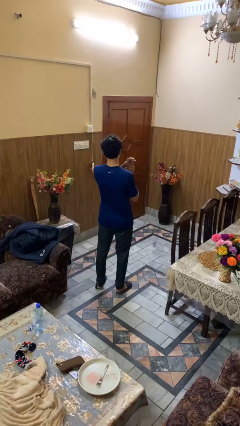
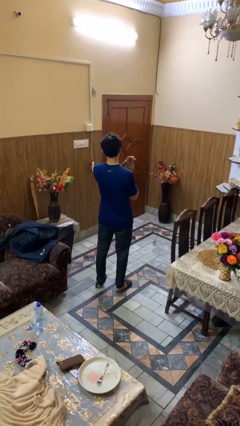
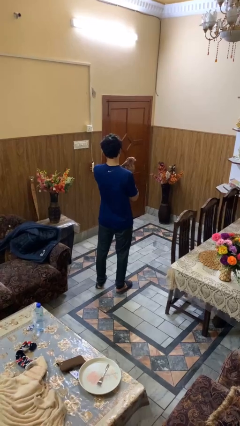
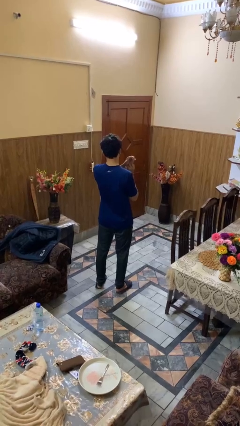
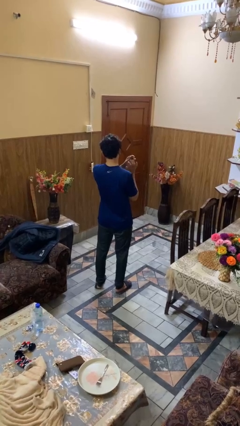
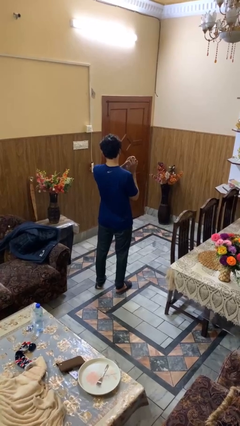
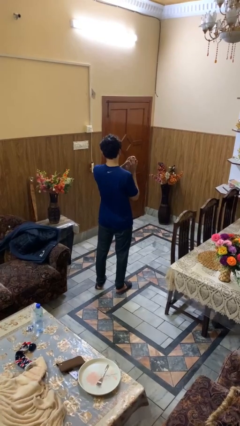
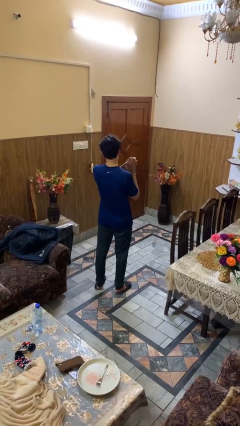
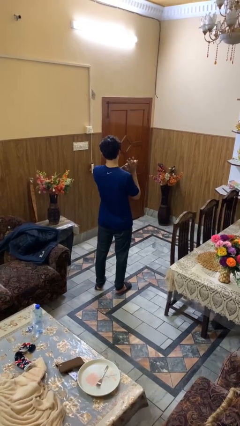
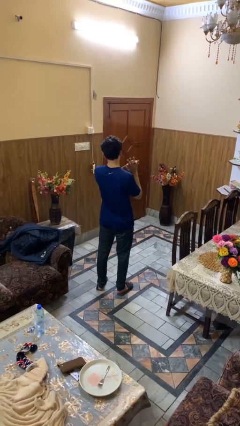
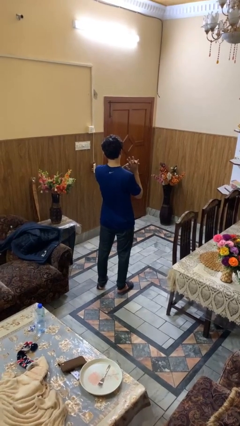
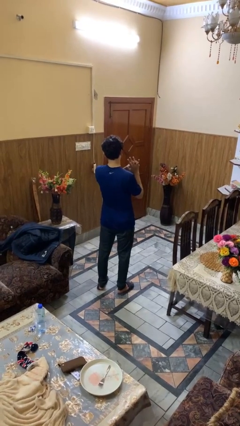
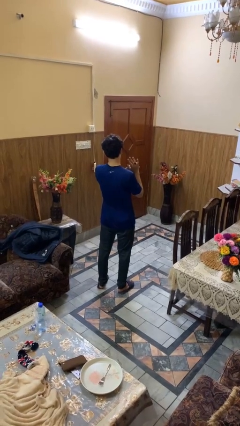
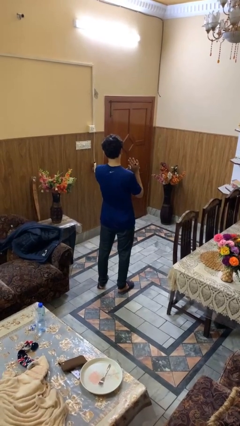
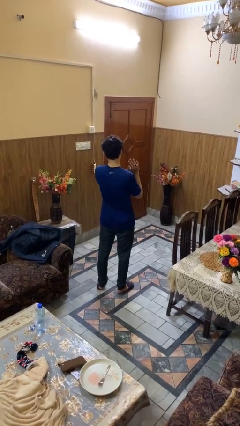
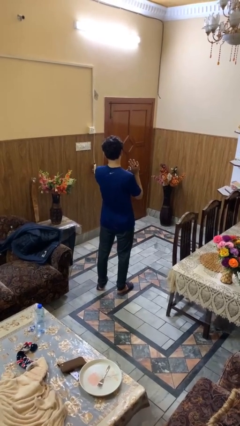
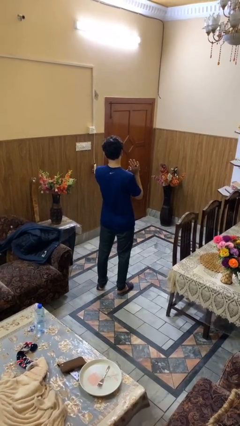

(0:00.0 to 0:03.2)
person puts on ring

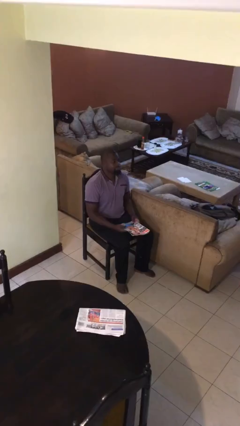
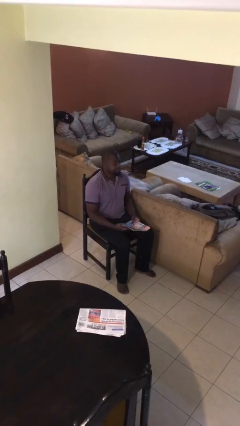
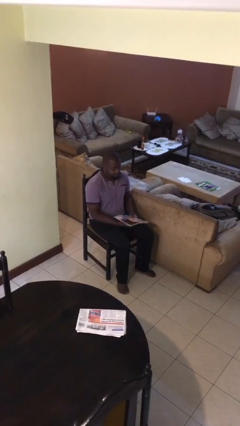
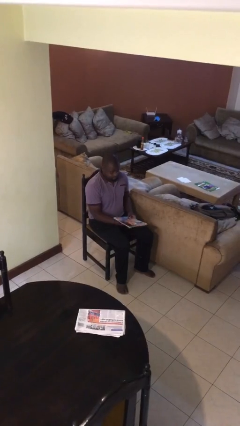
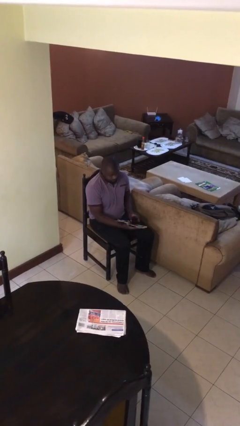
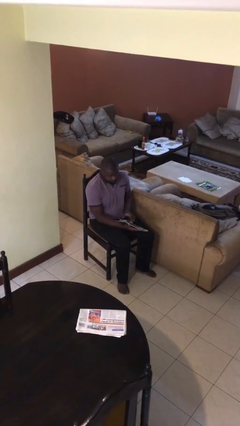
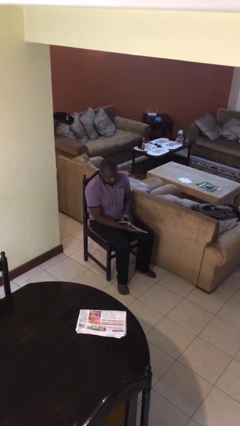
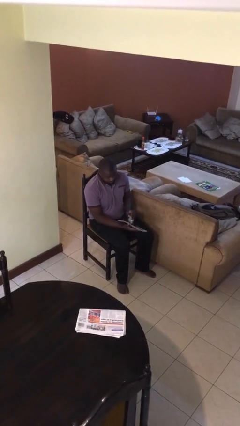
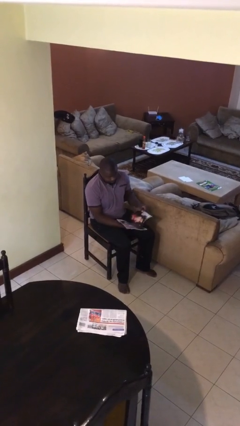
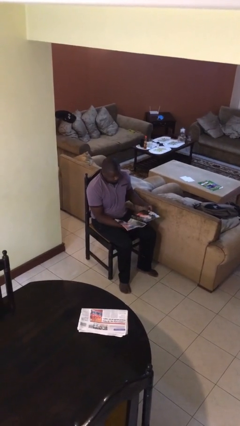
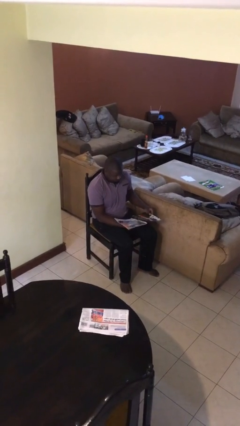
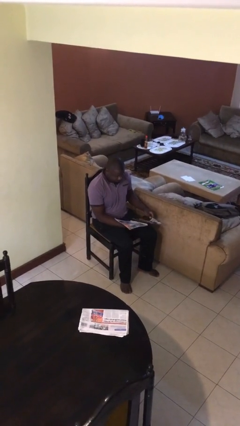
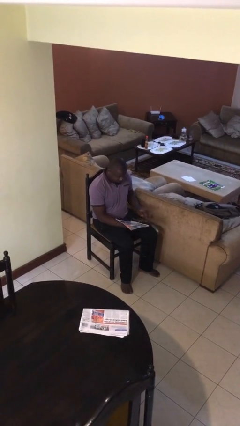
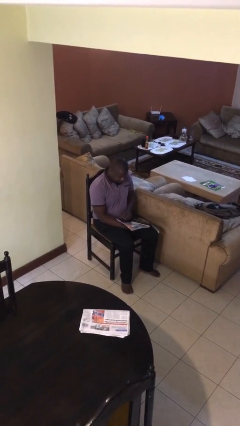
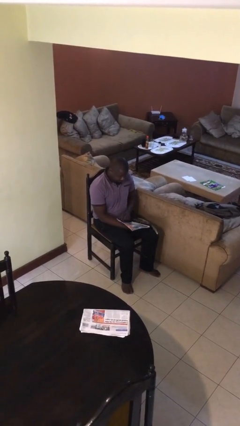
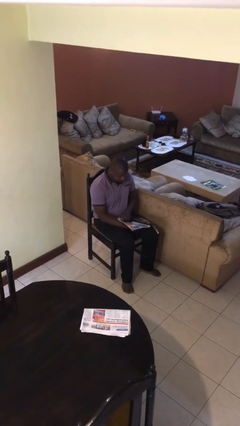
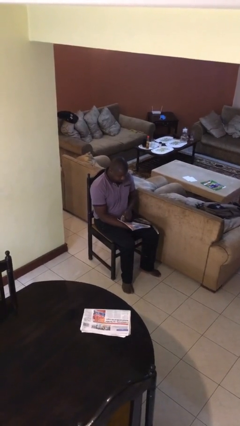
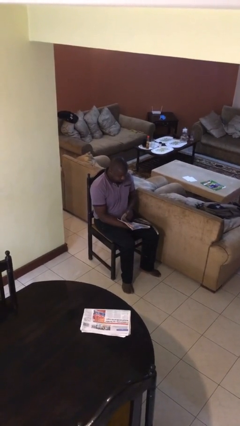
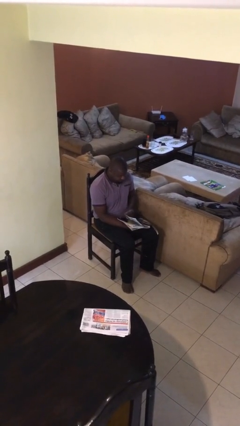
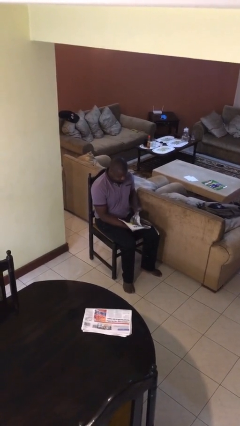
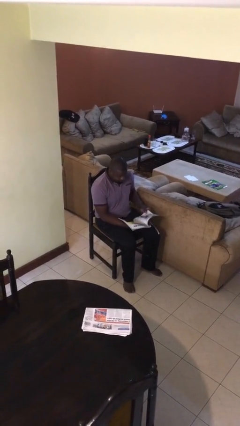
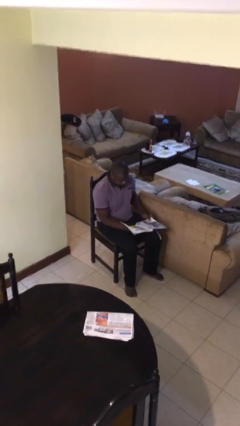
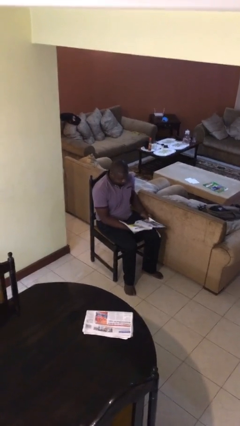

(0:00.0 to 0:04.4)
person reads document

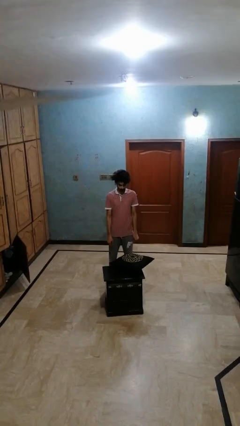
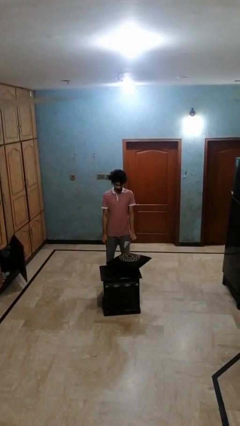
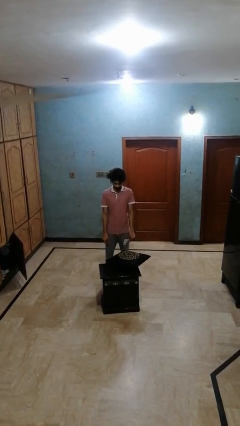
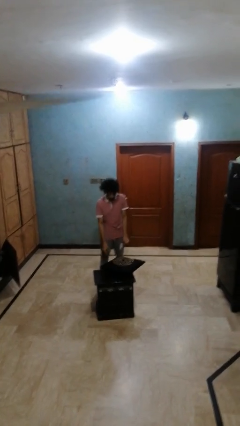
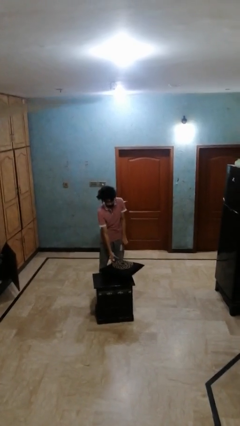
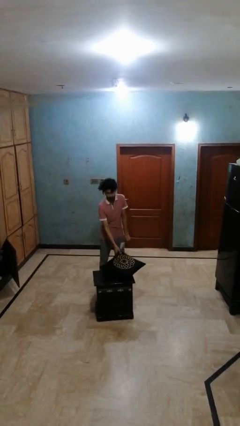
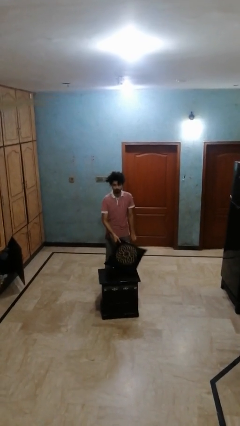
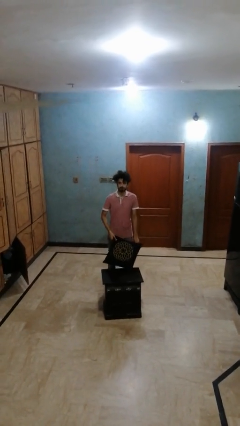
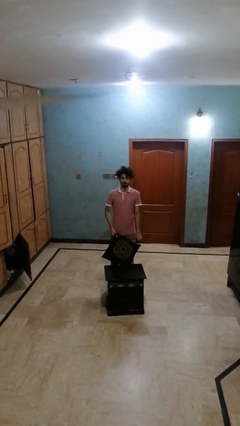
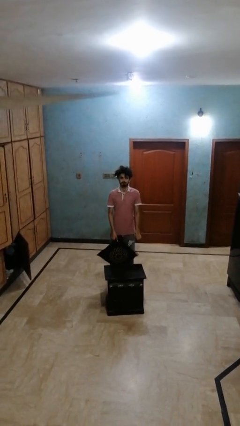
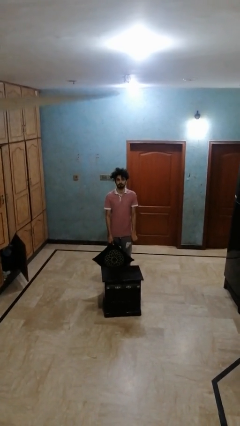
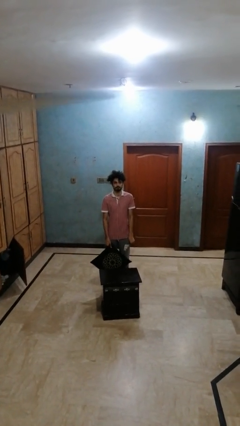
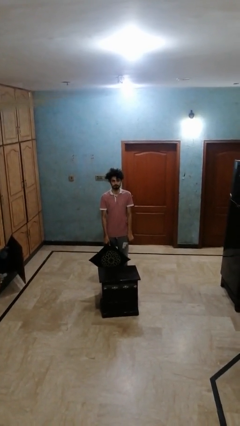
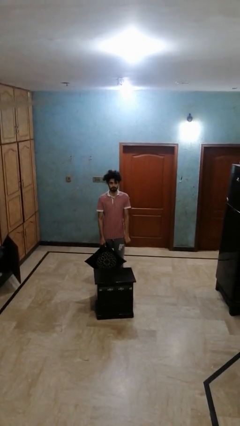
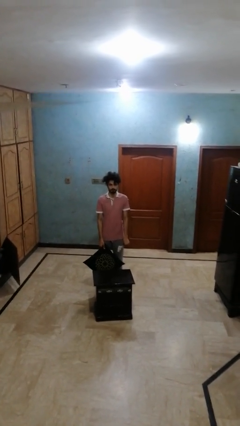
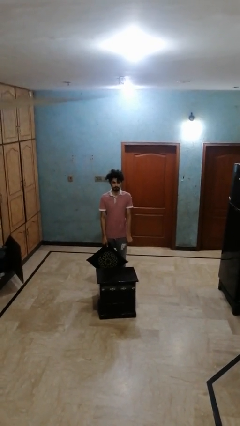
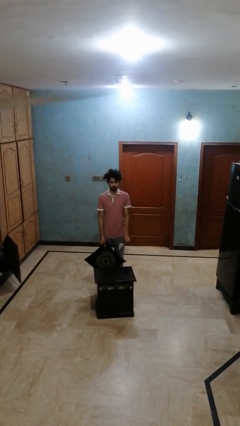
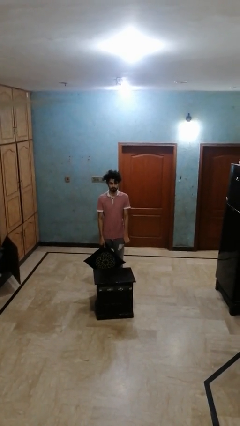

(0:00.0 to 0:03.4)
person picks up object from table

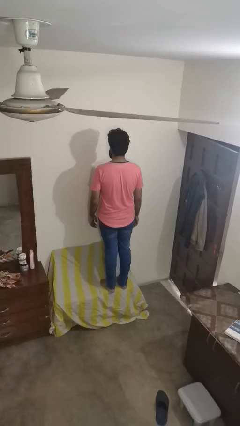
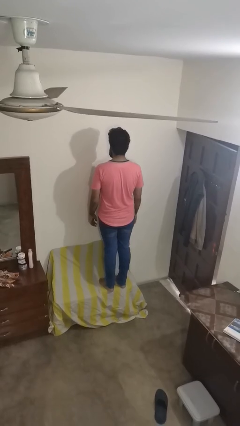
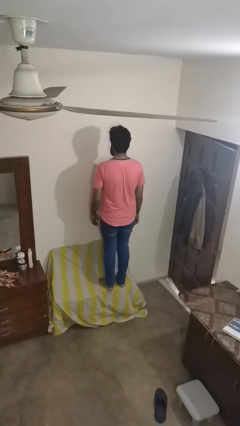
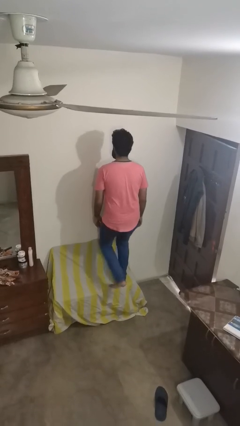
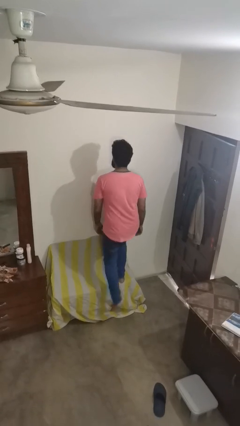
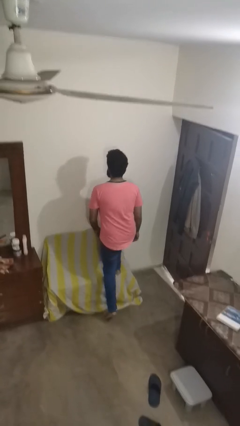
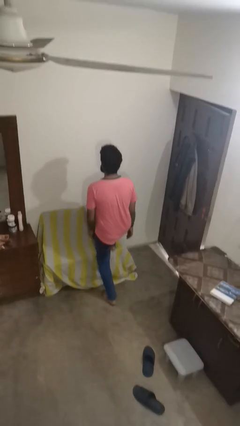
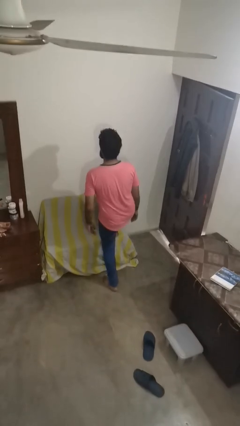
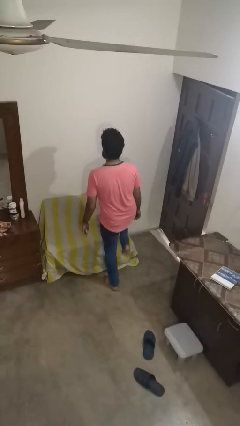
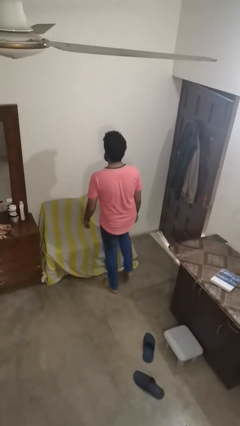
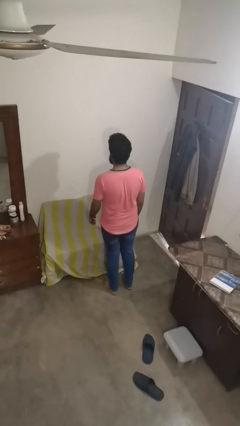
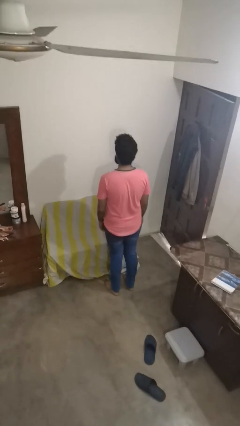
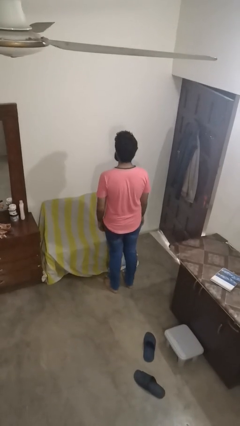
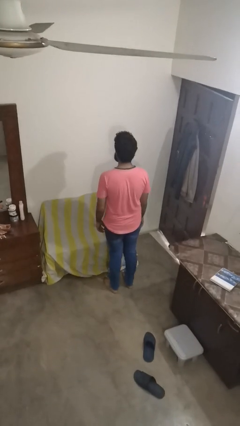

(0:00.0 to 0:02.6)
person climbs off couch

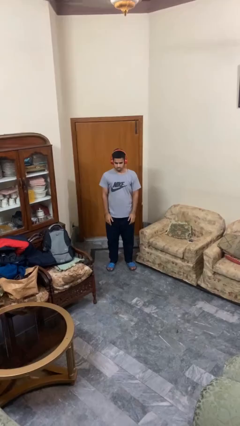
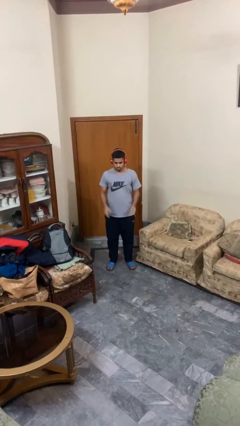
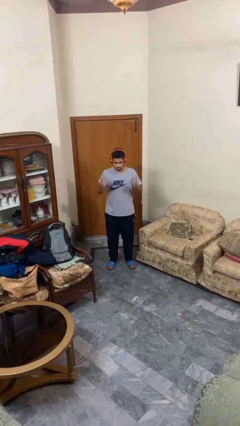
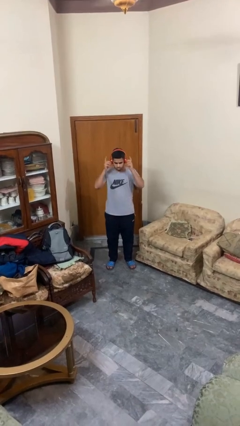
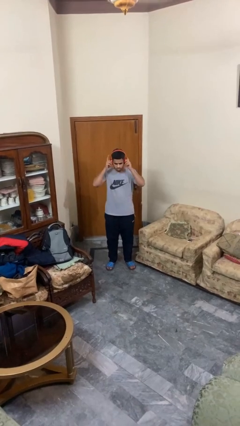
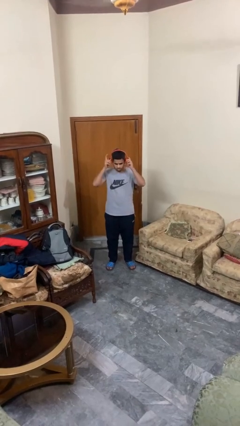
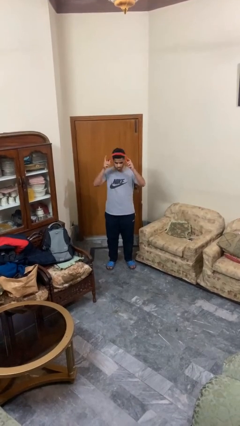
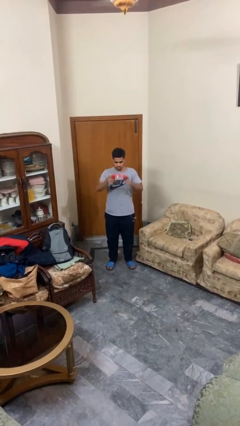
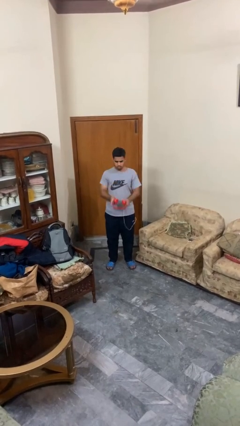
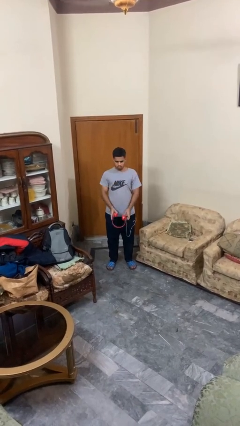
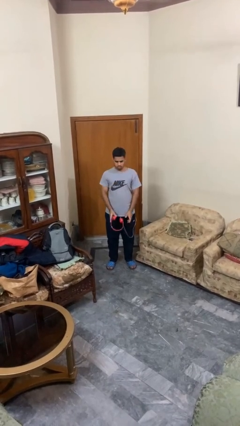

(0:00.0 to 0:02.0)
person takes off headphones

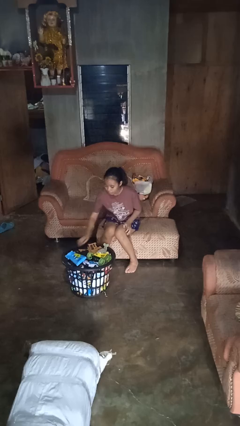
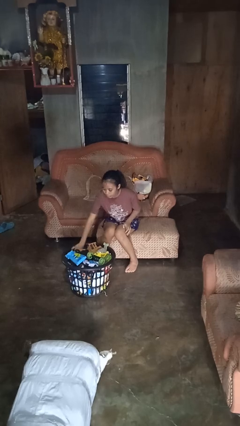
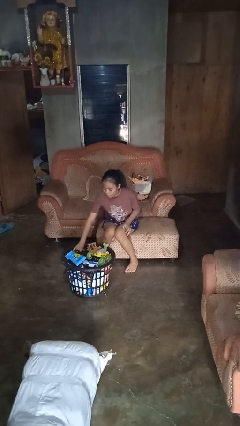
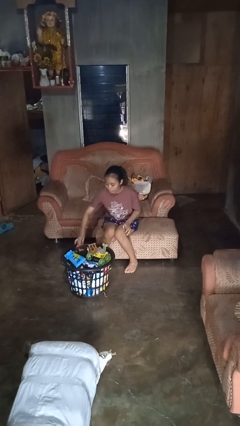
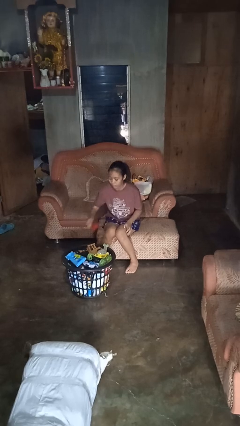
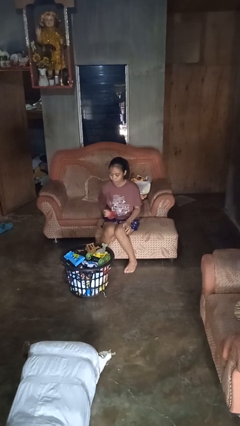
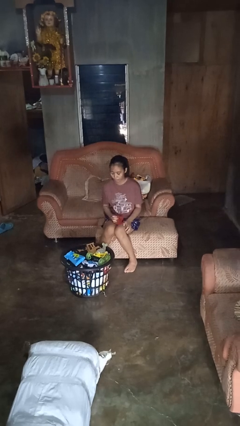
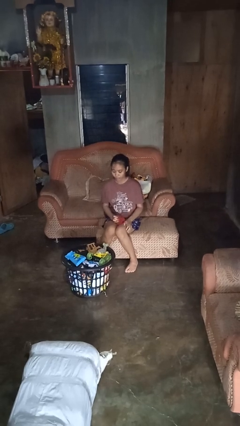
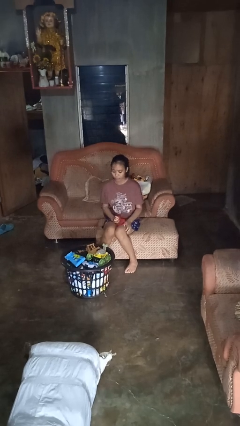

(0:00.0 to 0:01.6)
person takes object from basket
